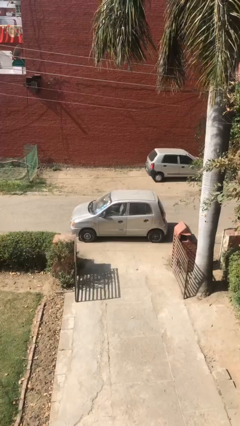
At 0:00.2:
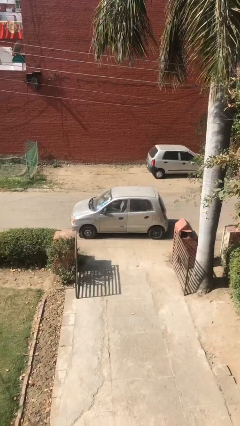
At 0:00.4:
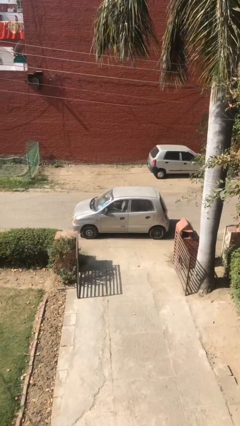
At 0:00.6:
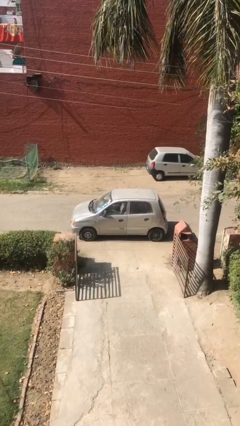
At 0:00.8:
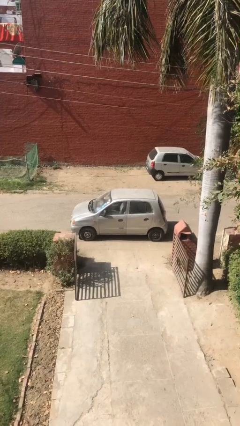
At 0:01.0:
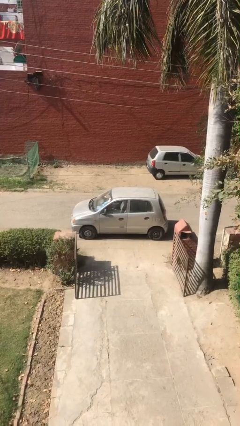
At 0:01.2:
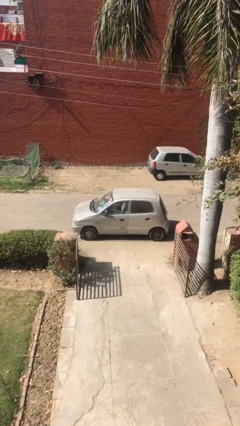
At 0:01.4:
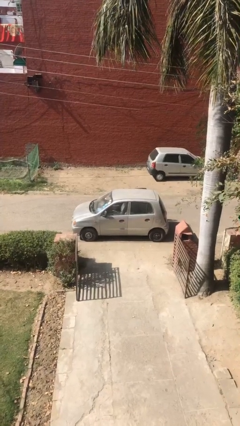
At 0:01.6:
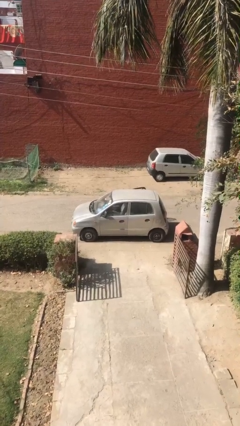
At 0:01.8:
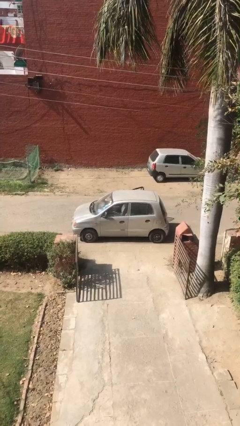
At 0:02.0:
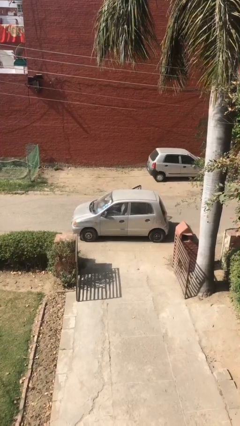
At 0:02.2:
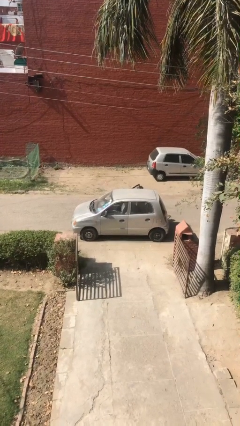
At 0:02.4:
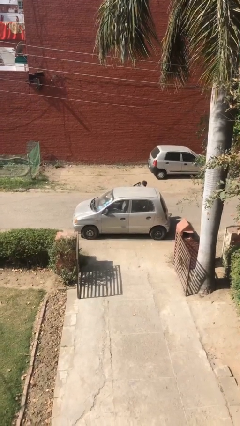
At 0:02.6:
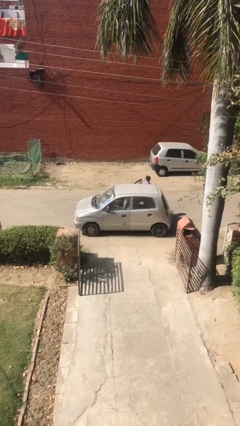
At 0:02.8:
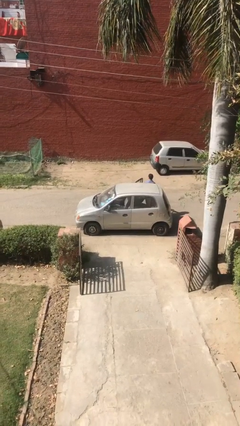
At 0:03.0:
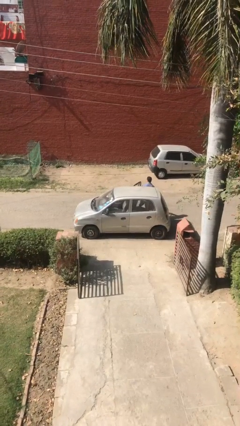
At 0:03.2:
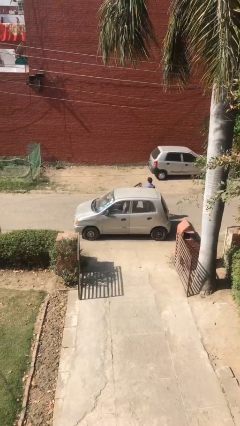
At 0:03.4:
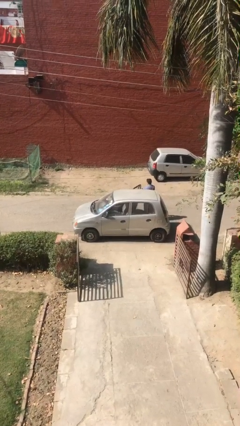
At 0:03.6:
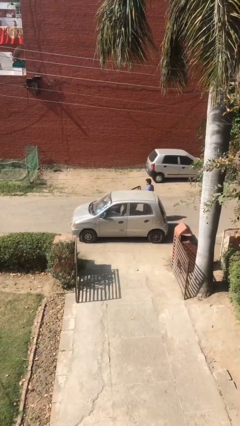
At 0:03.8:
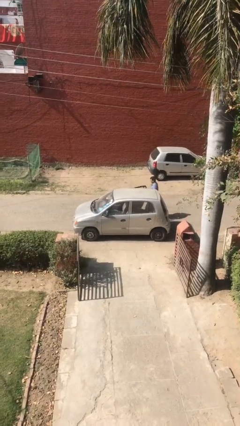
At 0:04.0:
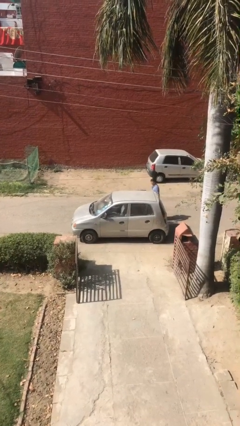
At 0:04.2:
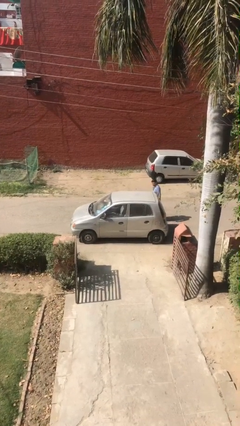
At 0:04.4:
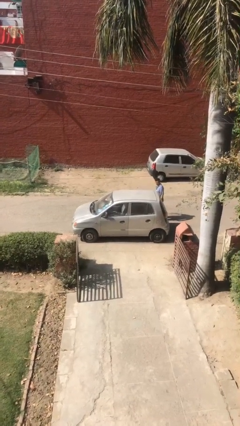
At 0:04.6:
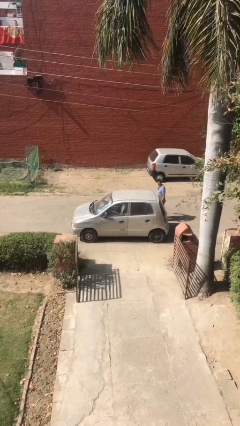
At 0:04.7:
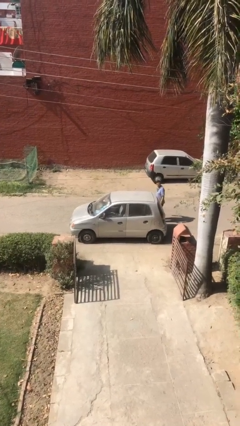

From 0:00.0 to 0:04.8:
car drops off person

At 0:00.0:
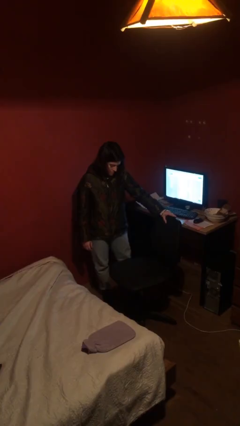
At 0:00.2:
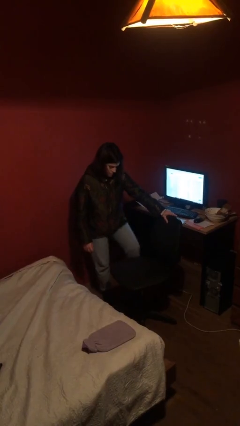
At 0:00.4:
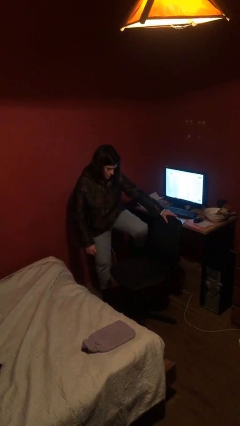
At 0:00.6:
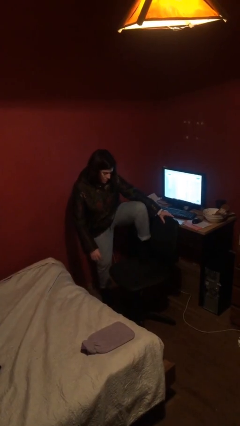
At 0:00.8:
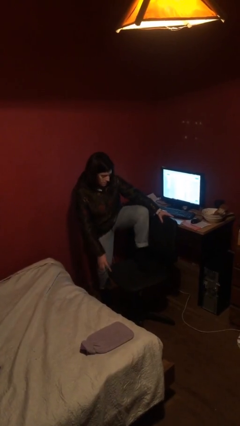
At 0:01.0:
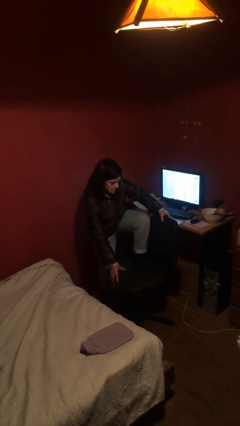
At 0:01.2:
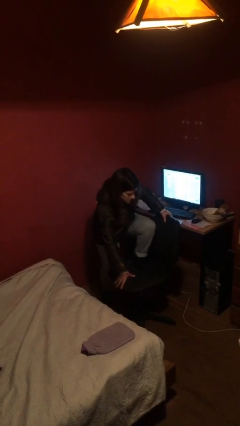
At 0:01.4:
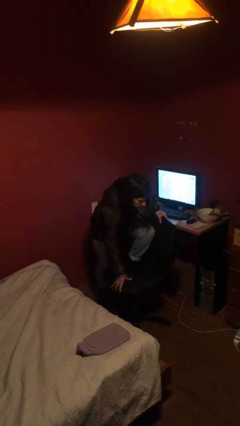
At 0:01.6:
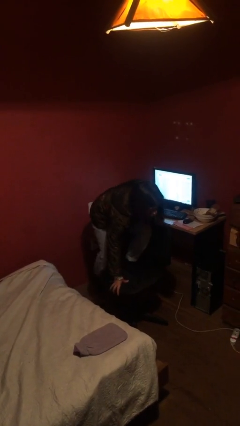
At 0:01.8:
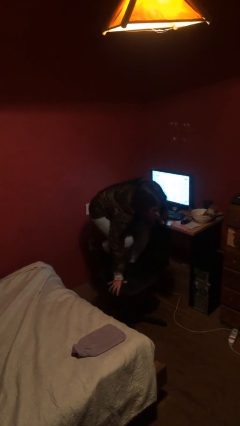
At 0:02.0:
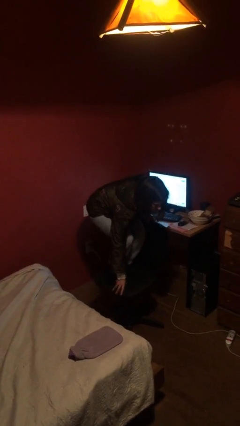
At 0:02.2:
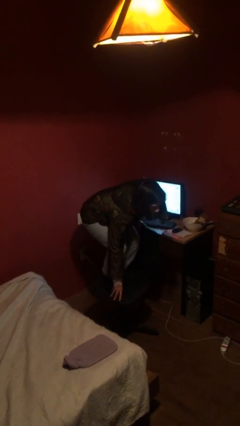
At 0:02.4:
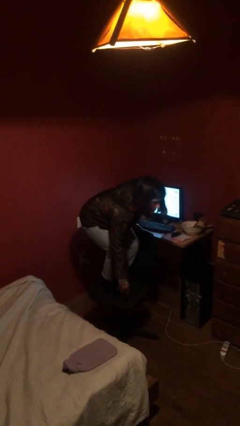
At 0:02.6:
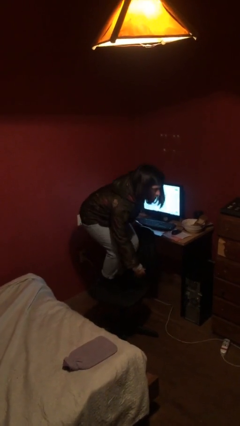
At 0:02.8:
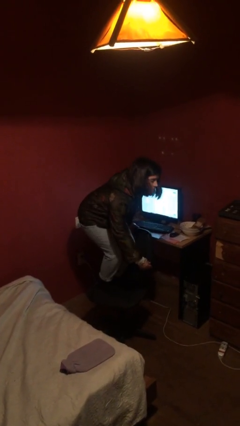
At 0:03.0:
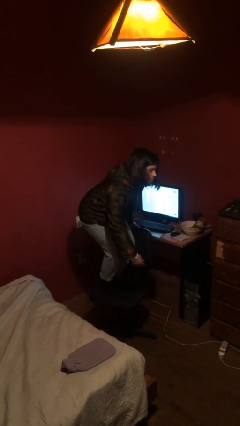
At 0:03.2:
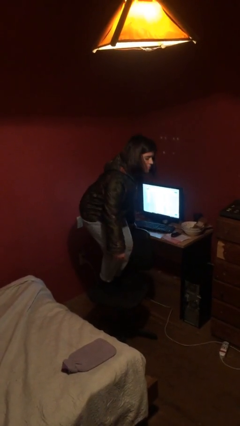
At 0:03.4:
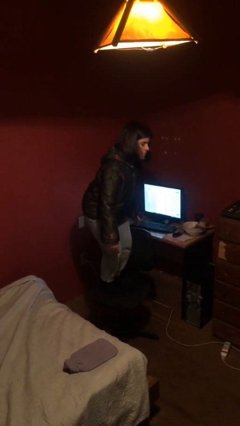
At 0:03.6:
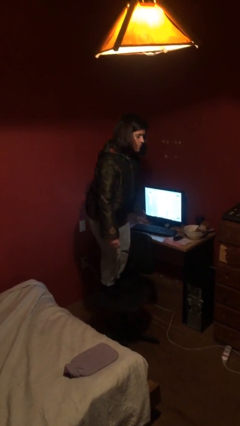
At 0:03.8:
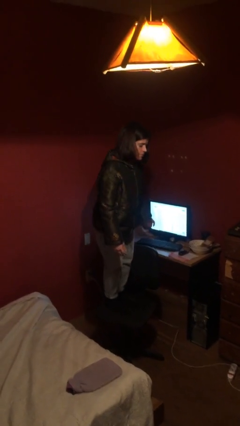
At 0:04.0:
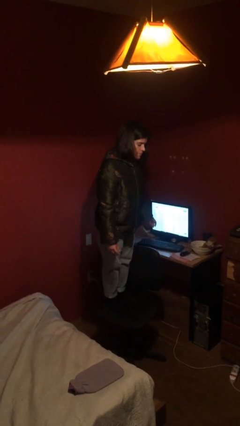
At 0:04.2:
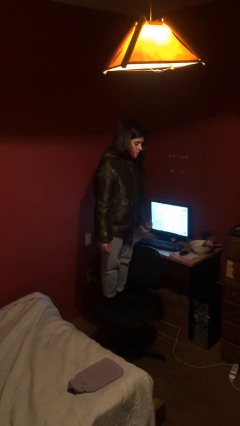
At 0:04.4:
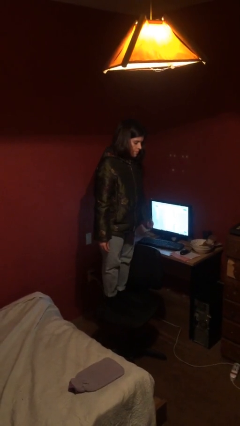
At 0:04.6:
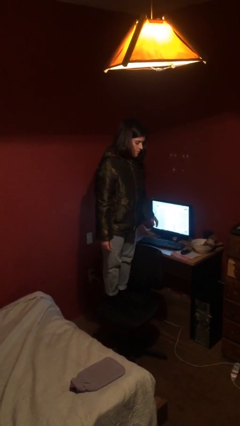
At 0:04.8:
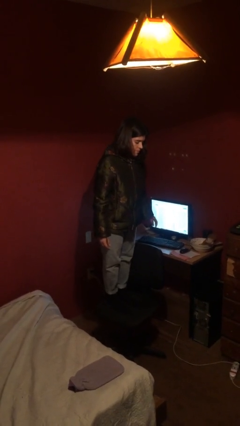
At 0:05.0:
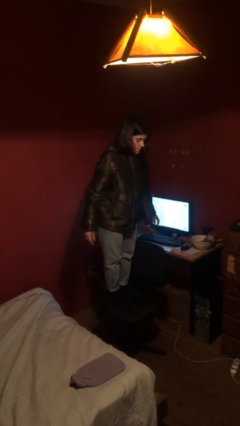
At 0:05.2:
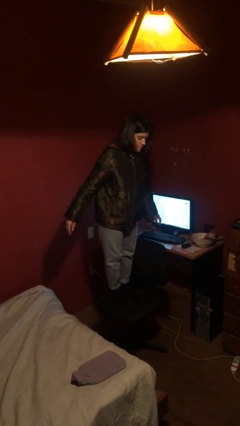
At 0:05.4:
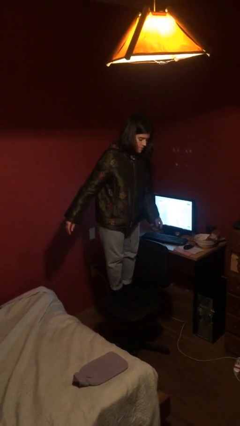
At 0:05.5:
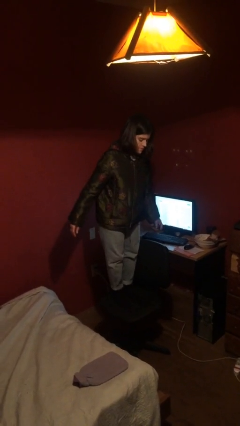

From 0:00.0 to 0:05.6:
person climbs on chair

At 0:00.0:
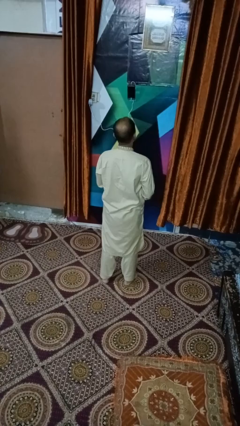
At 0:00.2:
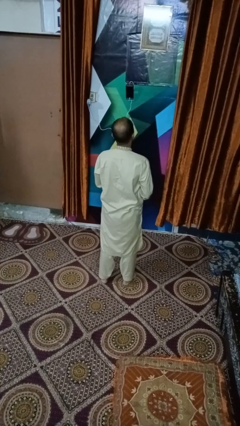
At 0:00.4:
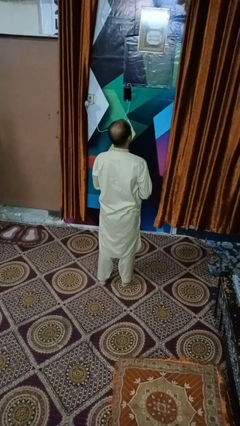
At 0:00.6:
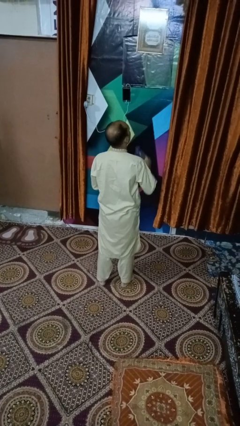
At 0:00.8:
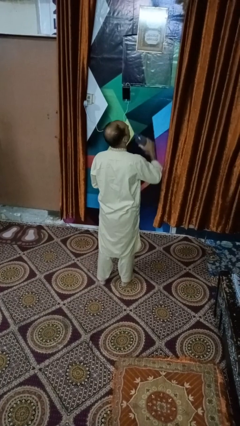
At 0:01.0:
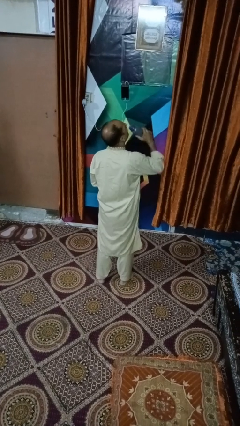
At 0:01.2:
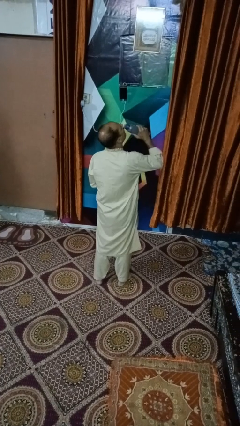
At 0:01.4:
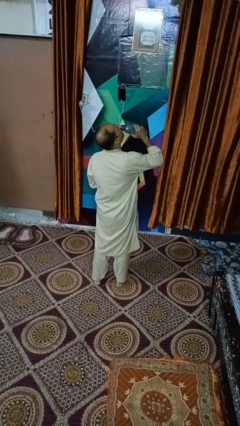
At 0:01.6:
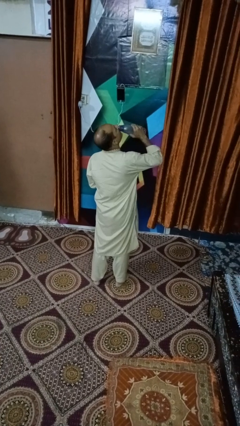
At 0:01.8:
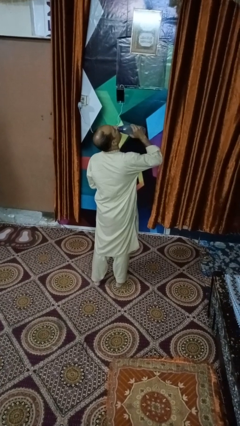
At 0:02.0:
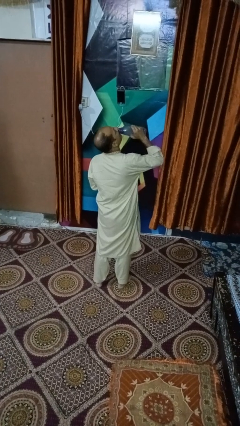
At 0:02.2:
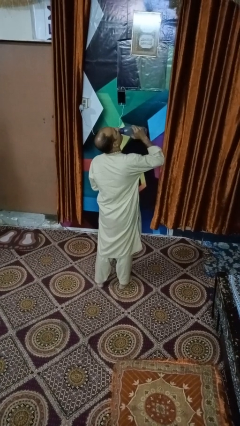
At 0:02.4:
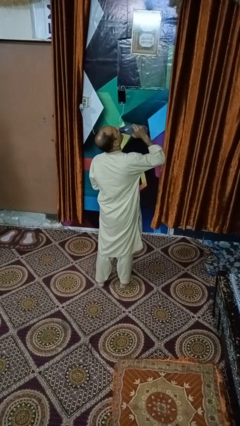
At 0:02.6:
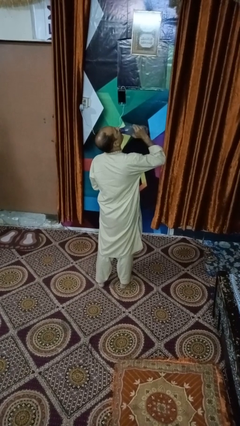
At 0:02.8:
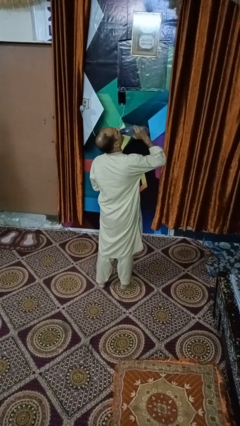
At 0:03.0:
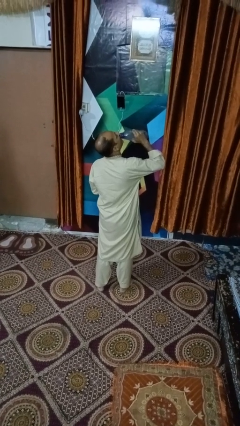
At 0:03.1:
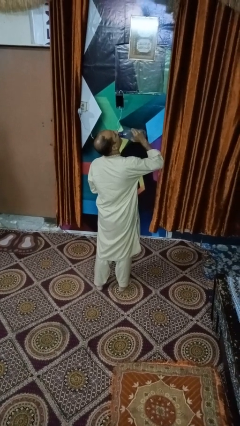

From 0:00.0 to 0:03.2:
person drinks from bottle

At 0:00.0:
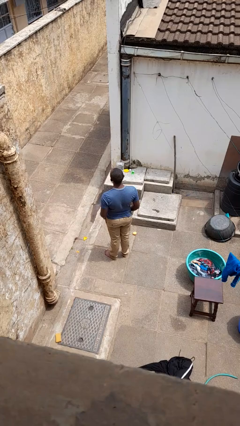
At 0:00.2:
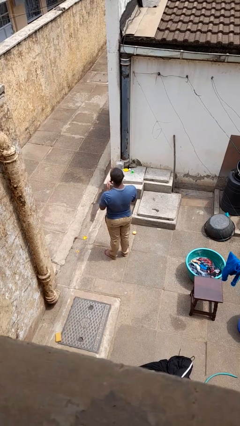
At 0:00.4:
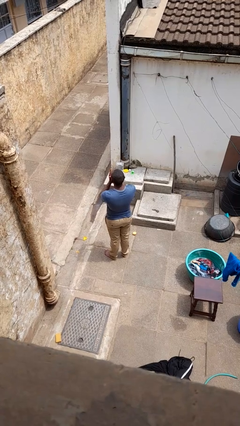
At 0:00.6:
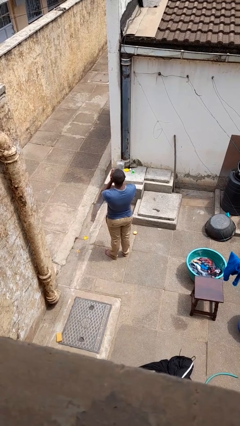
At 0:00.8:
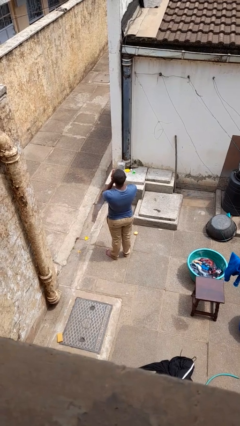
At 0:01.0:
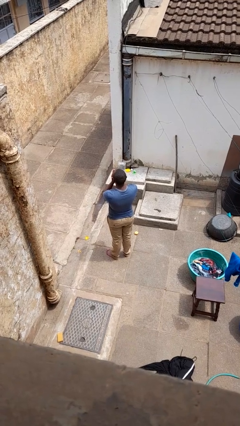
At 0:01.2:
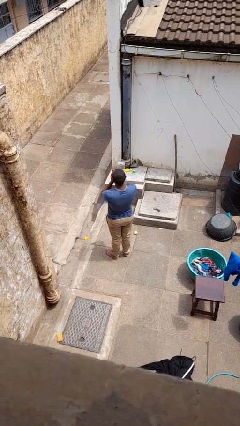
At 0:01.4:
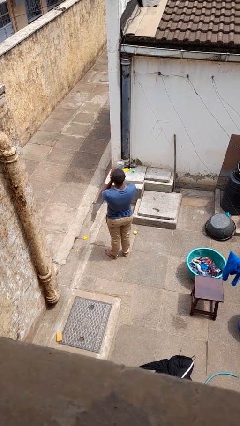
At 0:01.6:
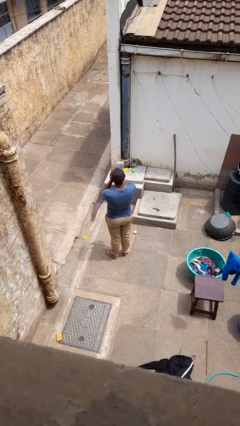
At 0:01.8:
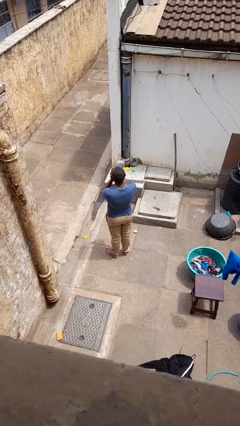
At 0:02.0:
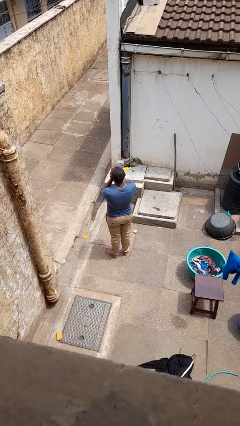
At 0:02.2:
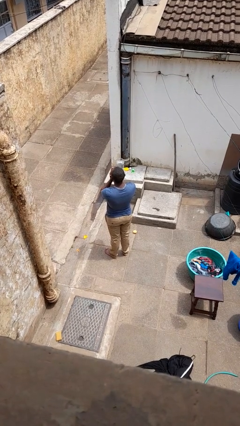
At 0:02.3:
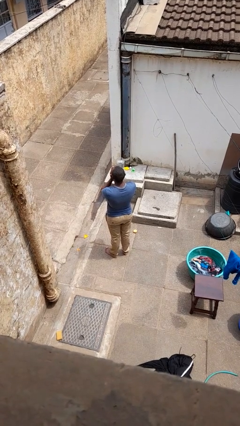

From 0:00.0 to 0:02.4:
person blows into hands

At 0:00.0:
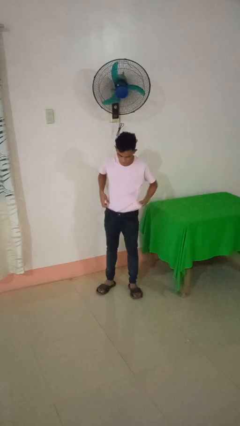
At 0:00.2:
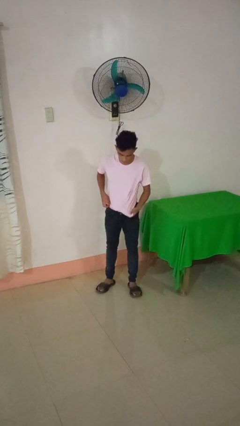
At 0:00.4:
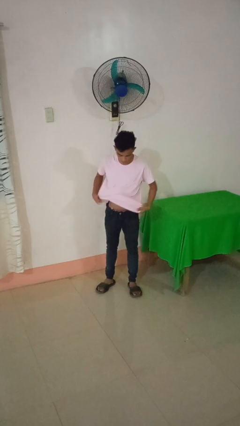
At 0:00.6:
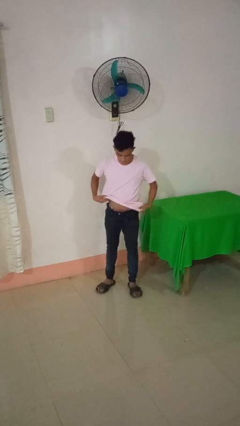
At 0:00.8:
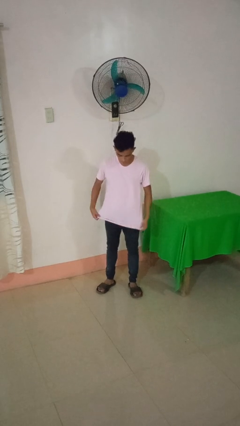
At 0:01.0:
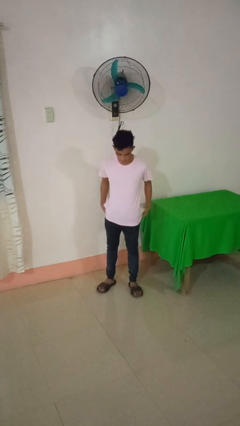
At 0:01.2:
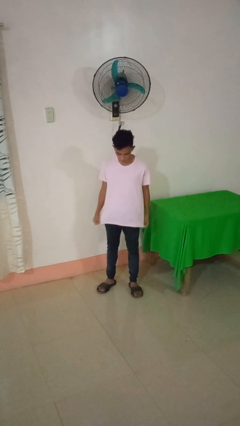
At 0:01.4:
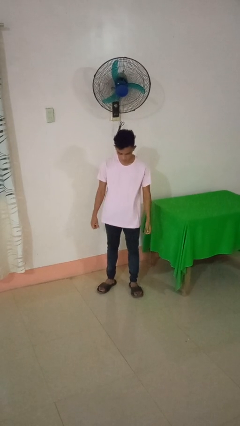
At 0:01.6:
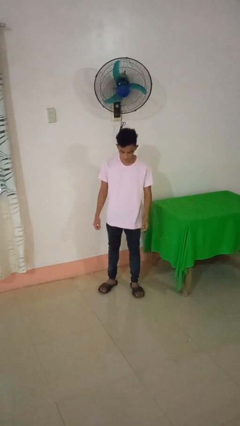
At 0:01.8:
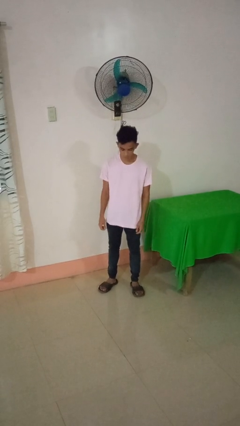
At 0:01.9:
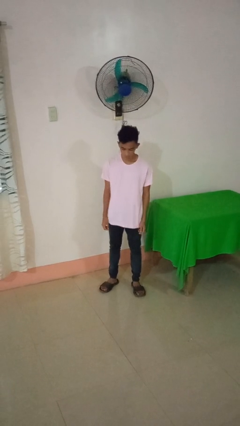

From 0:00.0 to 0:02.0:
person untucks shirt
